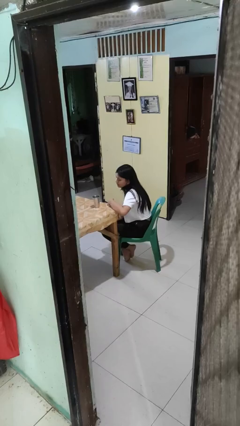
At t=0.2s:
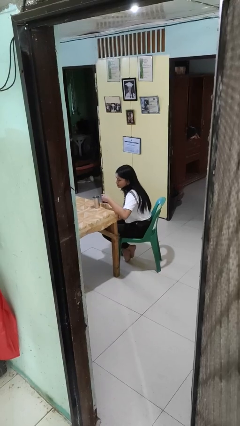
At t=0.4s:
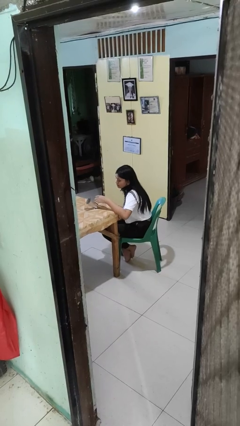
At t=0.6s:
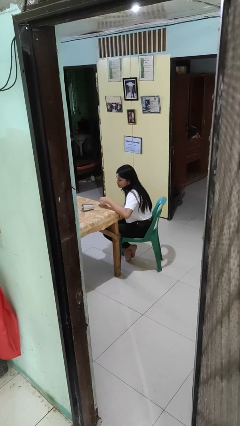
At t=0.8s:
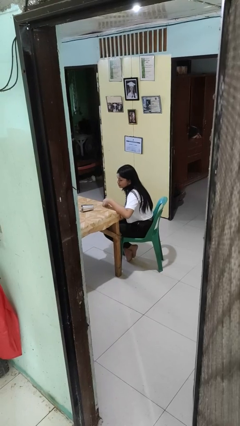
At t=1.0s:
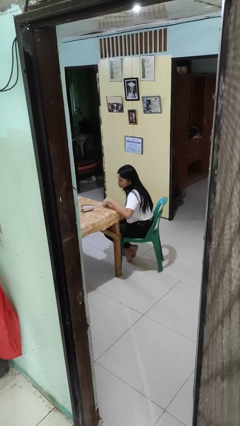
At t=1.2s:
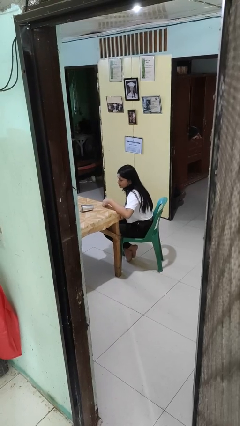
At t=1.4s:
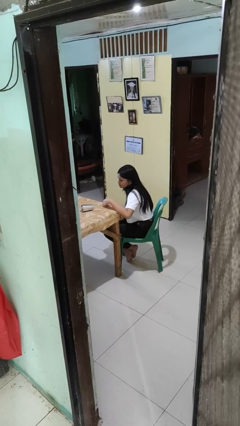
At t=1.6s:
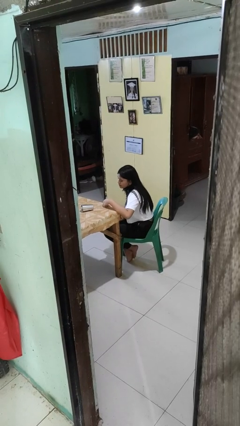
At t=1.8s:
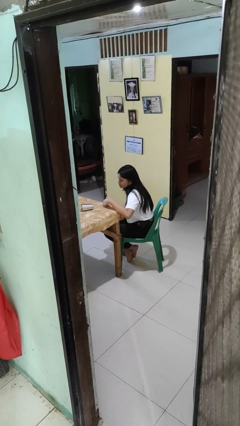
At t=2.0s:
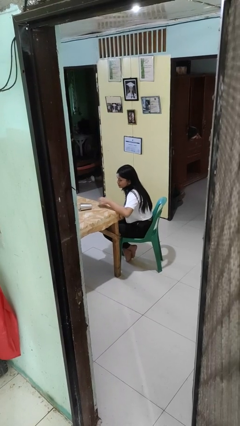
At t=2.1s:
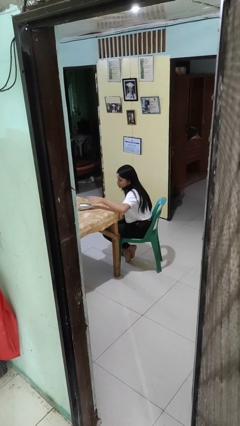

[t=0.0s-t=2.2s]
person knocks over glass

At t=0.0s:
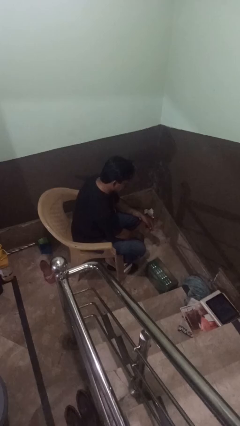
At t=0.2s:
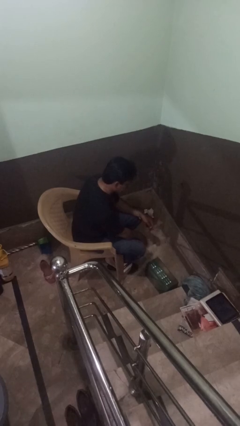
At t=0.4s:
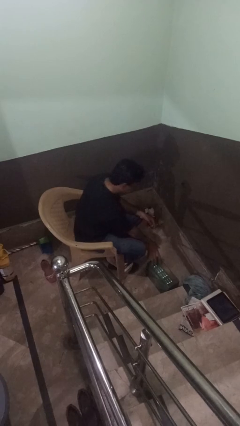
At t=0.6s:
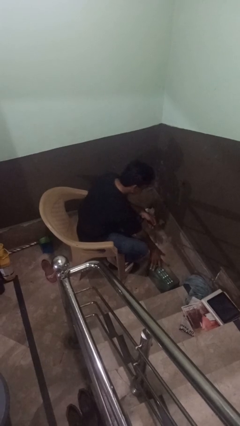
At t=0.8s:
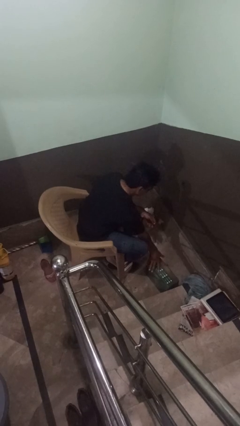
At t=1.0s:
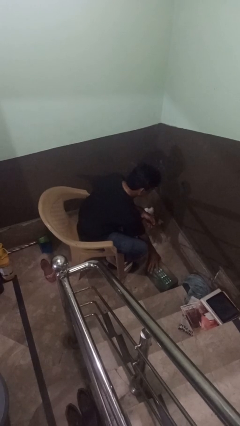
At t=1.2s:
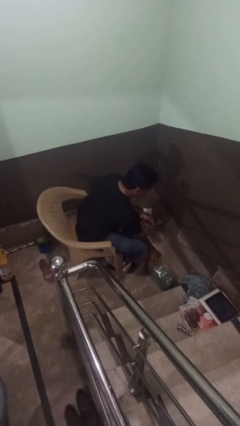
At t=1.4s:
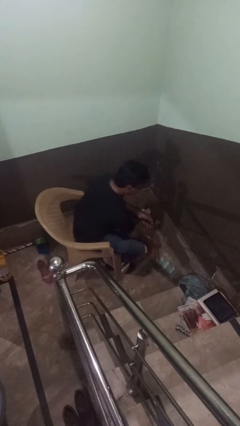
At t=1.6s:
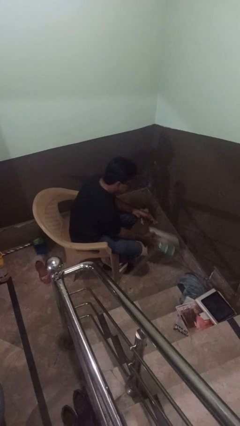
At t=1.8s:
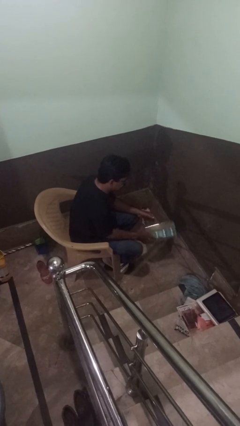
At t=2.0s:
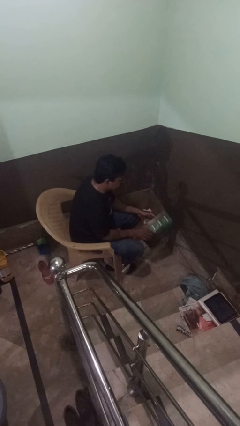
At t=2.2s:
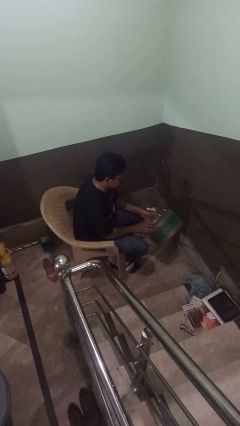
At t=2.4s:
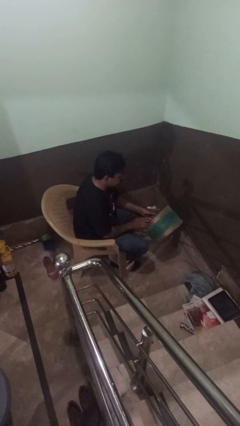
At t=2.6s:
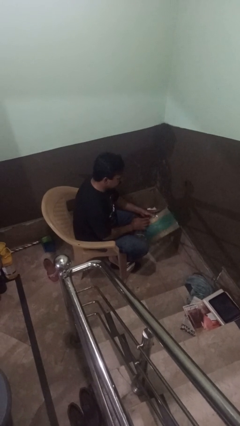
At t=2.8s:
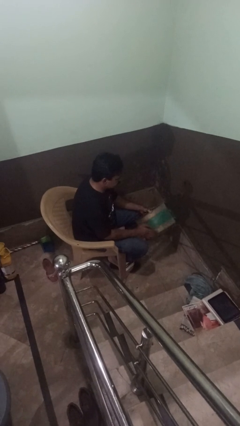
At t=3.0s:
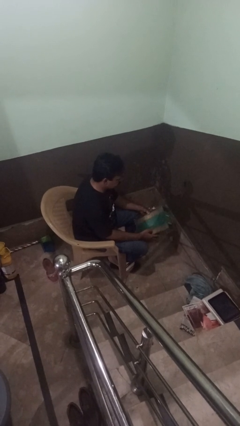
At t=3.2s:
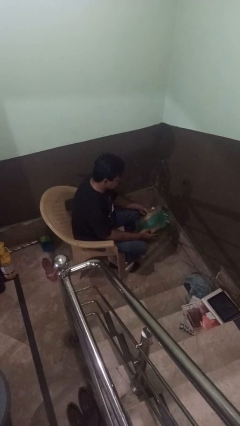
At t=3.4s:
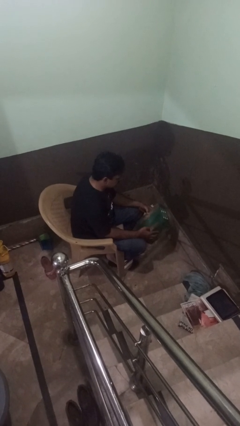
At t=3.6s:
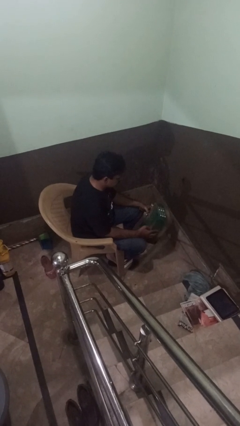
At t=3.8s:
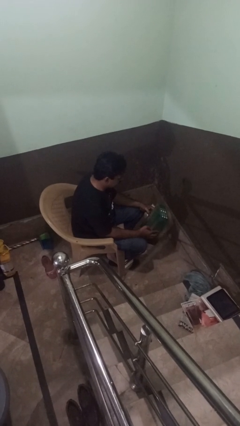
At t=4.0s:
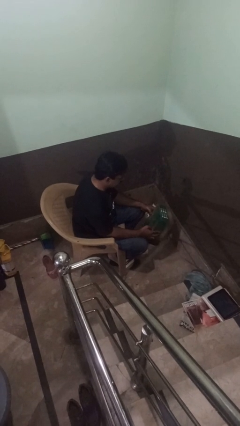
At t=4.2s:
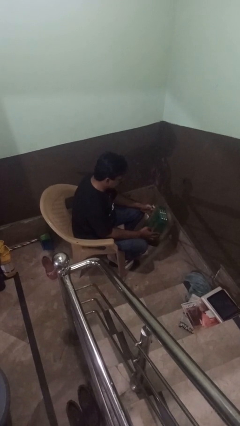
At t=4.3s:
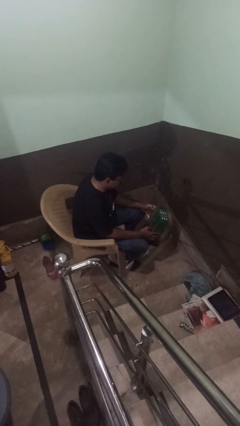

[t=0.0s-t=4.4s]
person picks up object from floor

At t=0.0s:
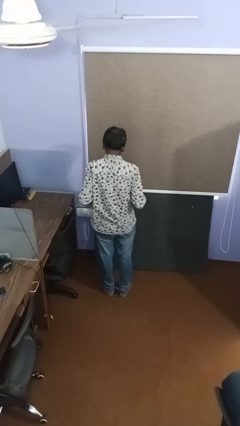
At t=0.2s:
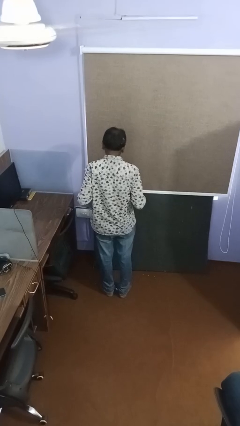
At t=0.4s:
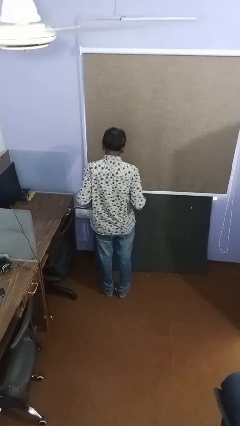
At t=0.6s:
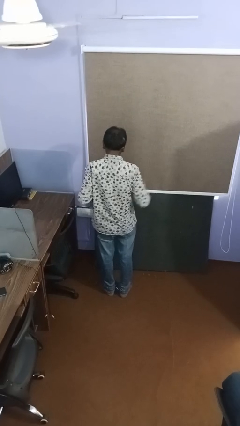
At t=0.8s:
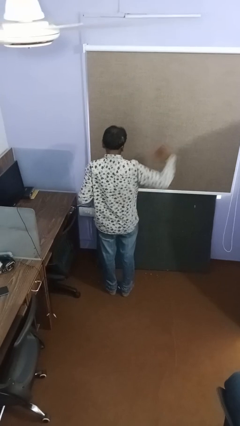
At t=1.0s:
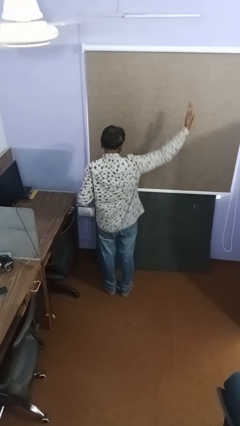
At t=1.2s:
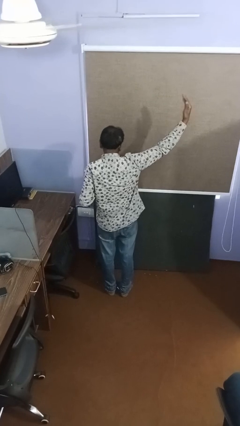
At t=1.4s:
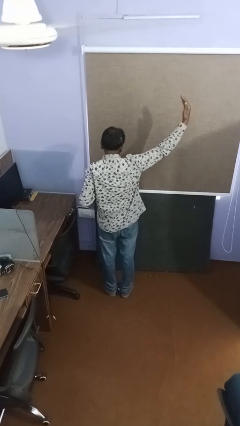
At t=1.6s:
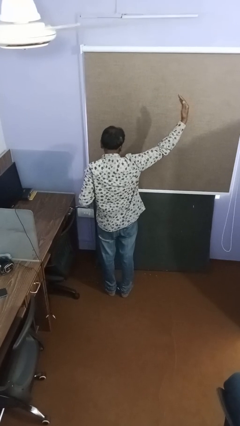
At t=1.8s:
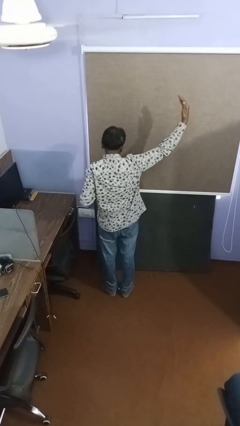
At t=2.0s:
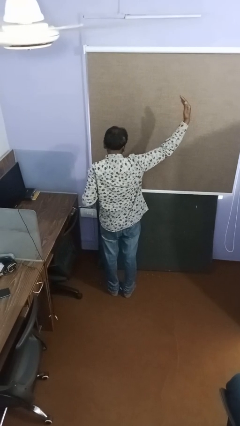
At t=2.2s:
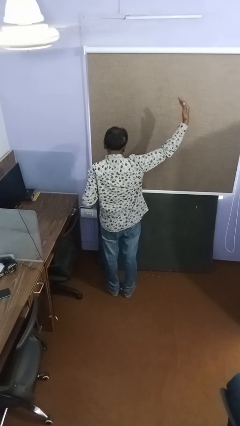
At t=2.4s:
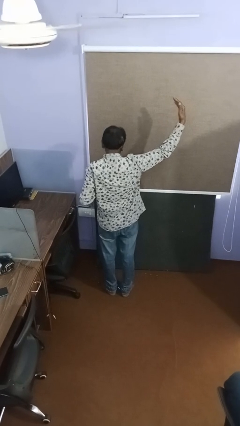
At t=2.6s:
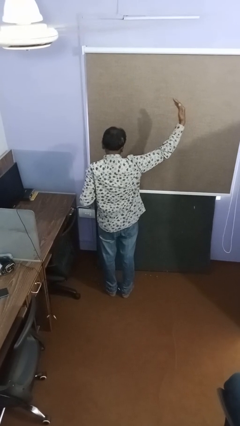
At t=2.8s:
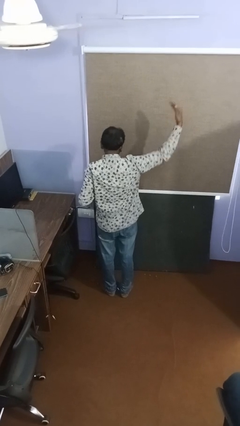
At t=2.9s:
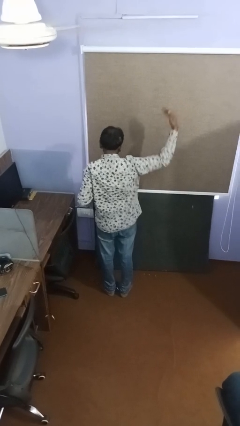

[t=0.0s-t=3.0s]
person gestures swipe right

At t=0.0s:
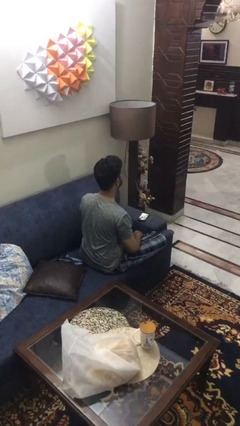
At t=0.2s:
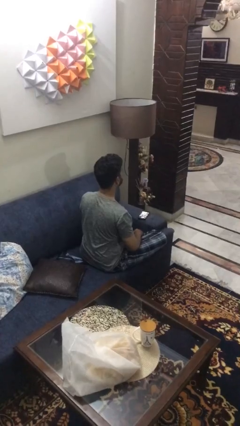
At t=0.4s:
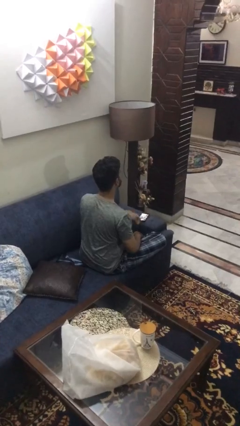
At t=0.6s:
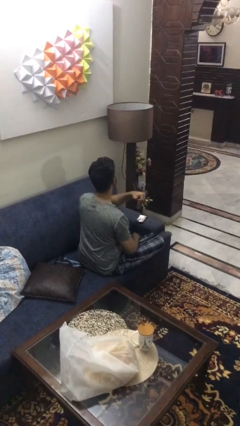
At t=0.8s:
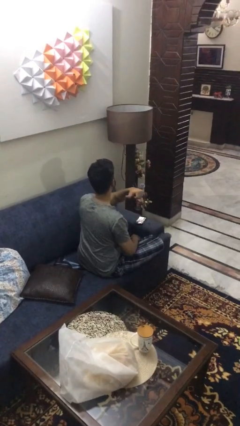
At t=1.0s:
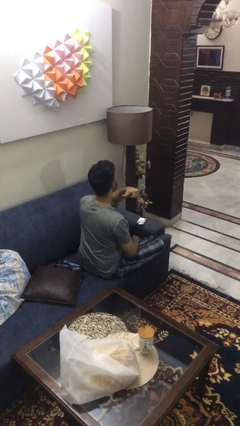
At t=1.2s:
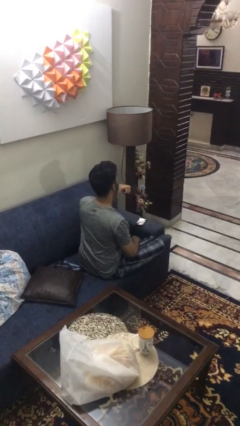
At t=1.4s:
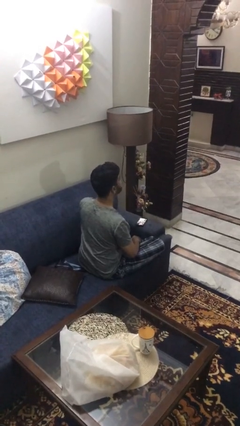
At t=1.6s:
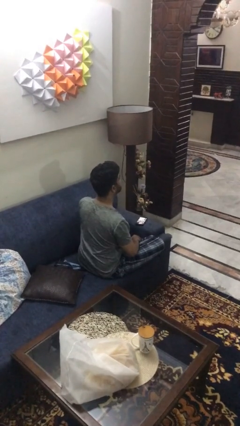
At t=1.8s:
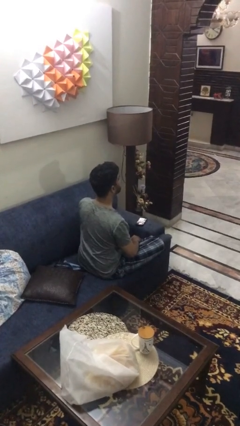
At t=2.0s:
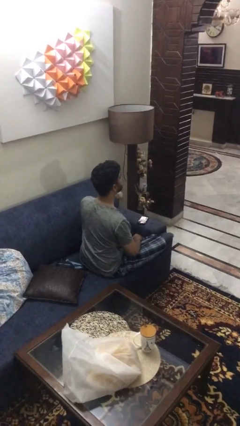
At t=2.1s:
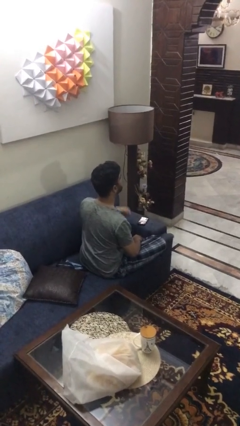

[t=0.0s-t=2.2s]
person gestures cut

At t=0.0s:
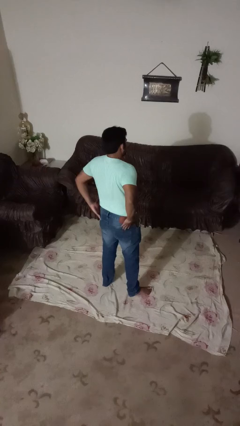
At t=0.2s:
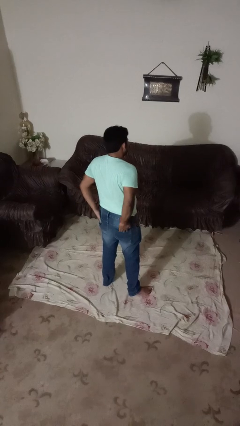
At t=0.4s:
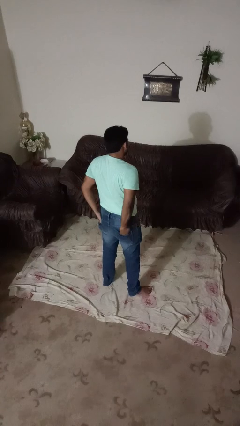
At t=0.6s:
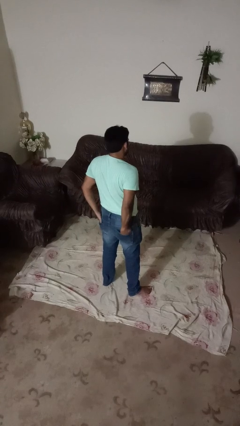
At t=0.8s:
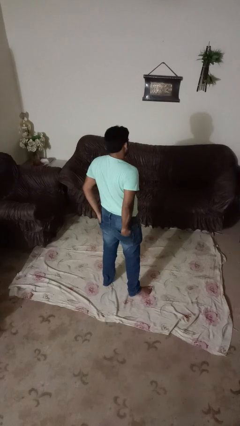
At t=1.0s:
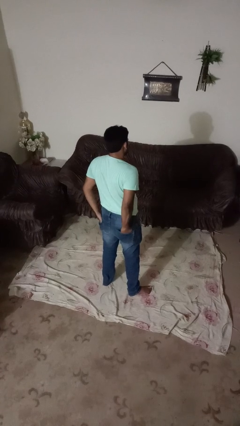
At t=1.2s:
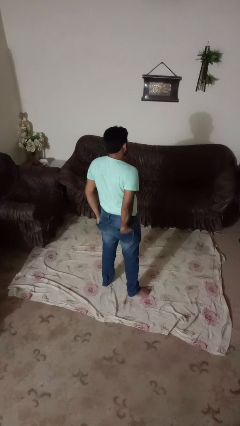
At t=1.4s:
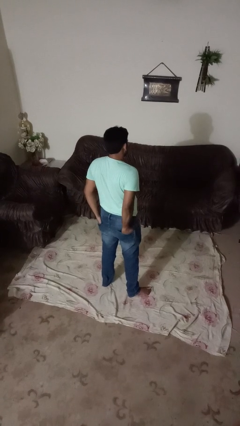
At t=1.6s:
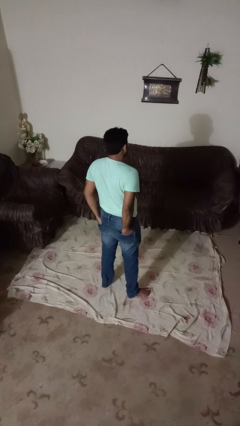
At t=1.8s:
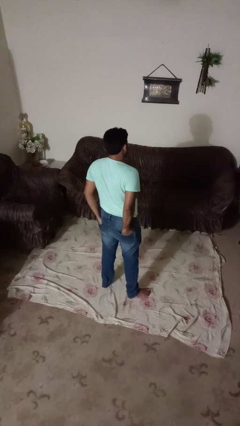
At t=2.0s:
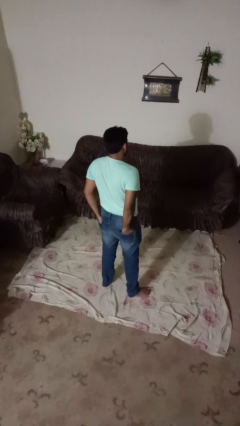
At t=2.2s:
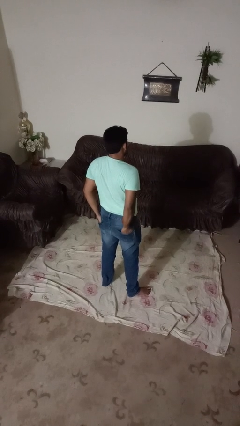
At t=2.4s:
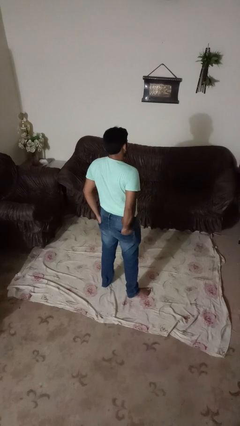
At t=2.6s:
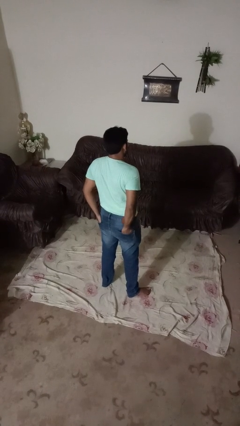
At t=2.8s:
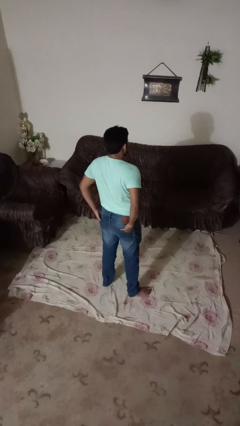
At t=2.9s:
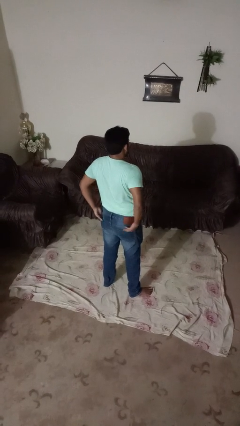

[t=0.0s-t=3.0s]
person puts hands in back pockets

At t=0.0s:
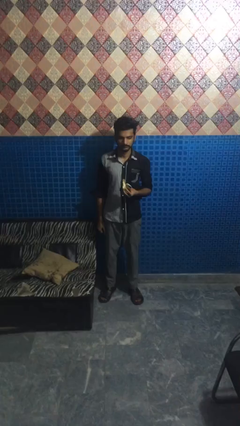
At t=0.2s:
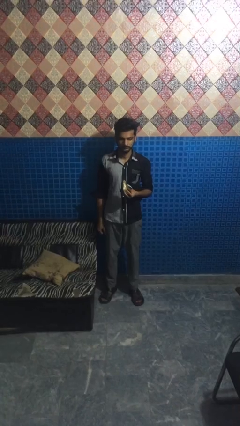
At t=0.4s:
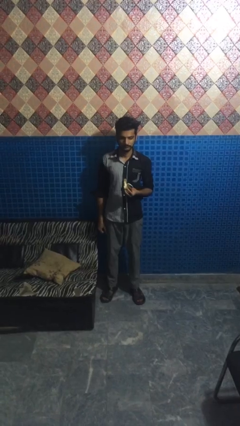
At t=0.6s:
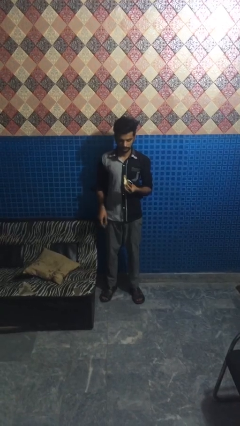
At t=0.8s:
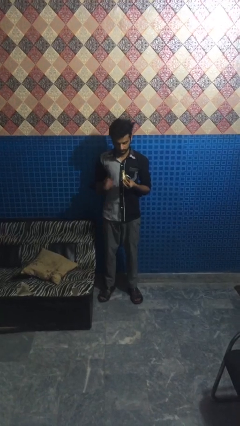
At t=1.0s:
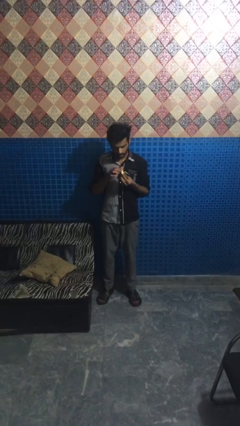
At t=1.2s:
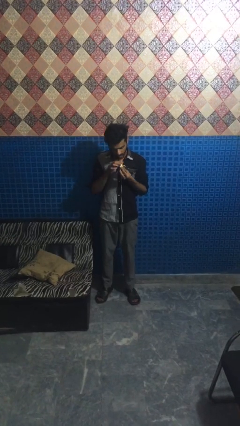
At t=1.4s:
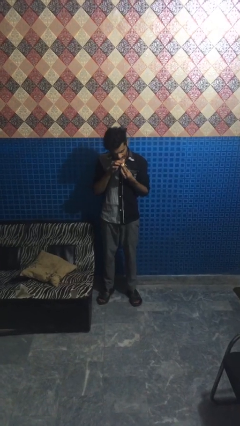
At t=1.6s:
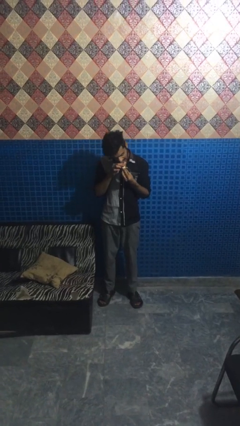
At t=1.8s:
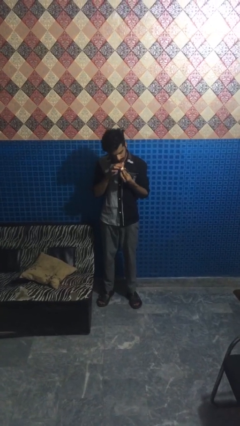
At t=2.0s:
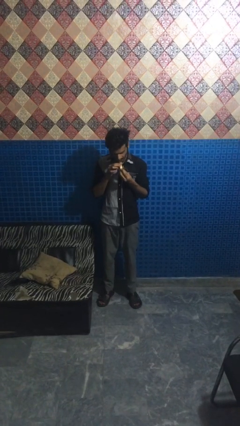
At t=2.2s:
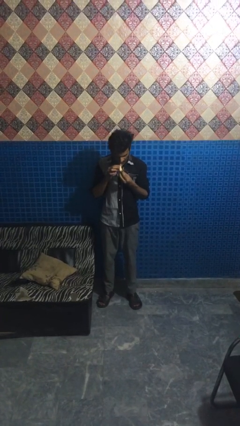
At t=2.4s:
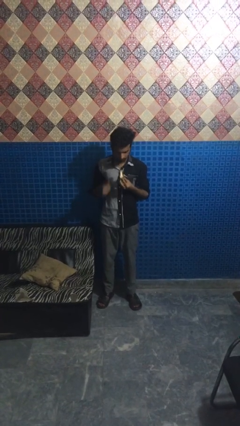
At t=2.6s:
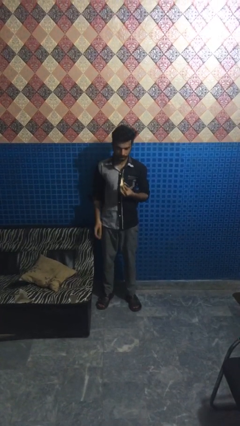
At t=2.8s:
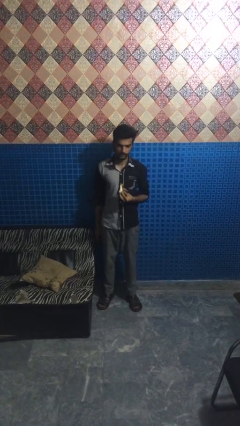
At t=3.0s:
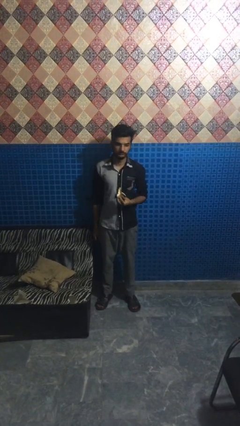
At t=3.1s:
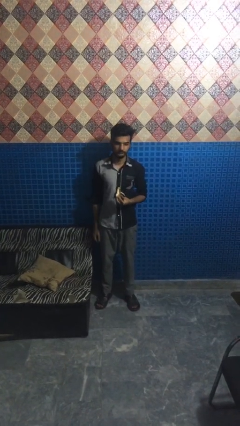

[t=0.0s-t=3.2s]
person eats banana
